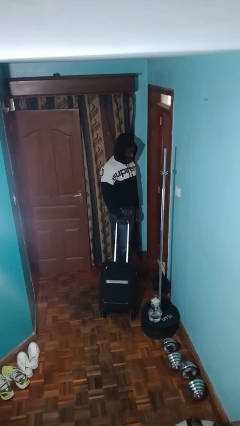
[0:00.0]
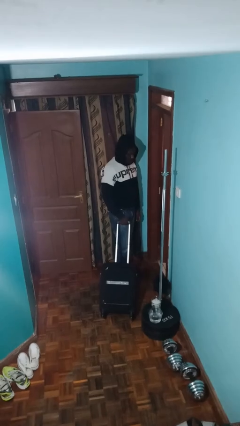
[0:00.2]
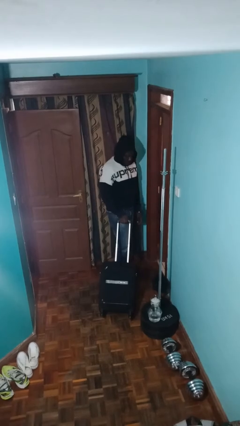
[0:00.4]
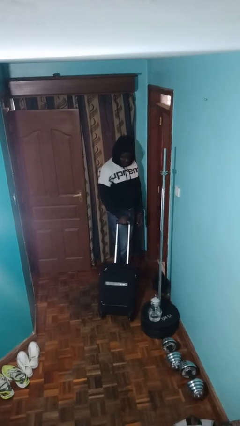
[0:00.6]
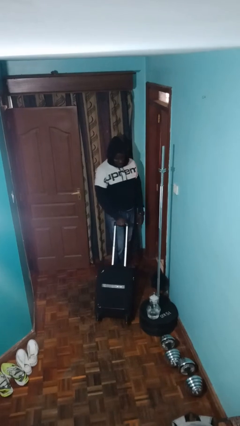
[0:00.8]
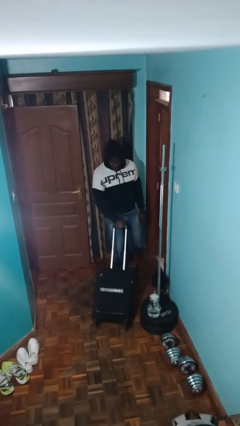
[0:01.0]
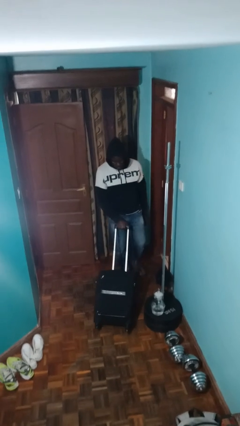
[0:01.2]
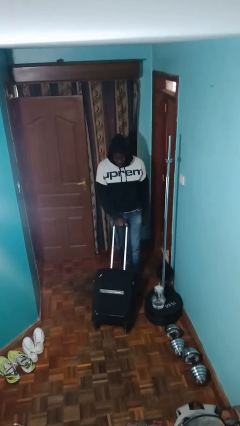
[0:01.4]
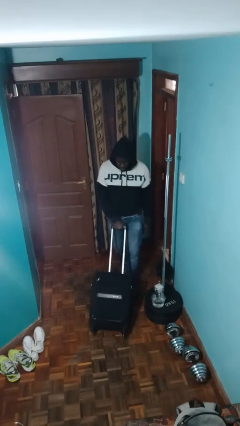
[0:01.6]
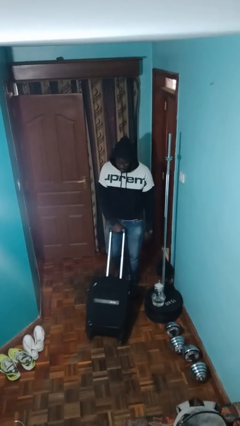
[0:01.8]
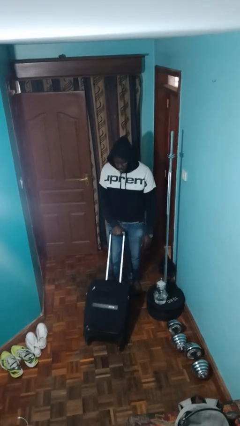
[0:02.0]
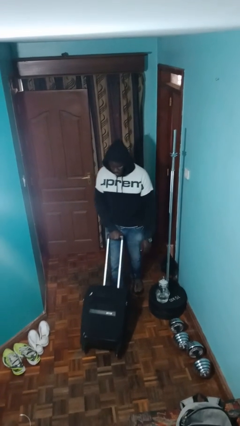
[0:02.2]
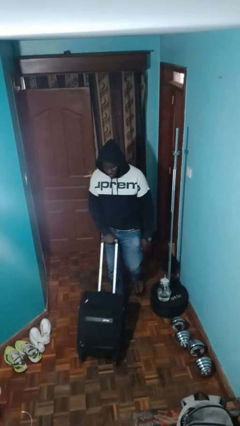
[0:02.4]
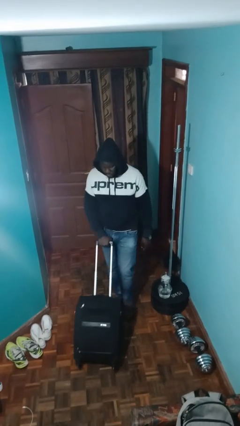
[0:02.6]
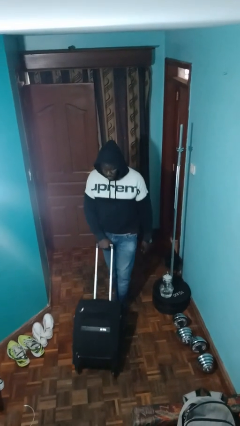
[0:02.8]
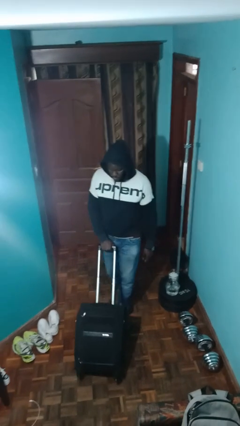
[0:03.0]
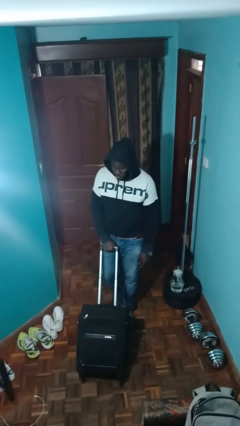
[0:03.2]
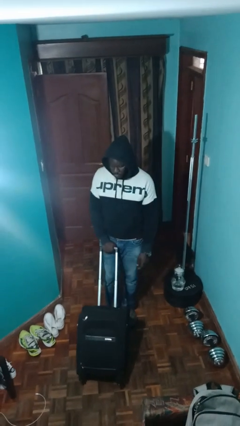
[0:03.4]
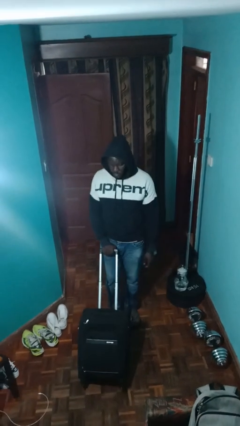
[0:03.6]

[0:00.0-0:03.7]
person pushes wheeled cart

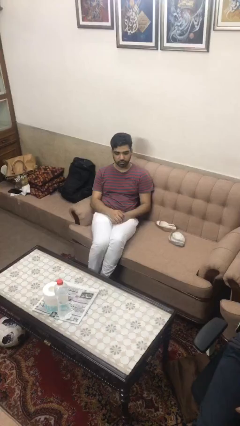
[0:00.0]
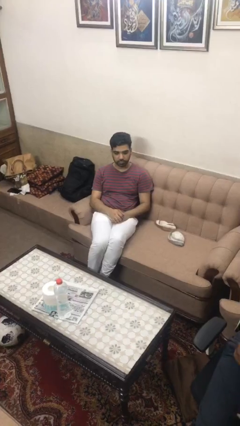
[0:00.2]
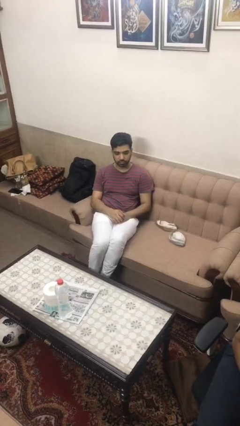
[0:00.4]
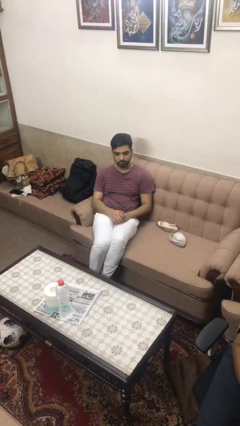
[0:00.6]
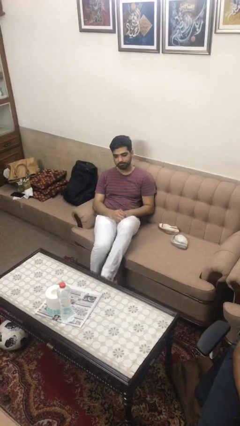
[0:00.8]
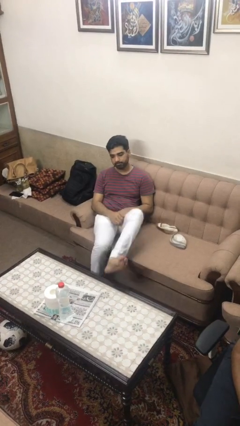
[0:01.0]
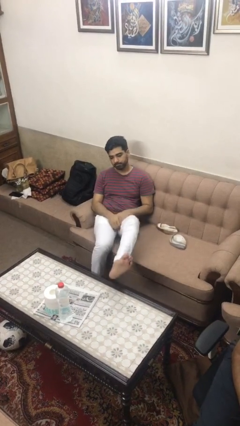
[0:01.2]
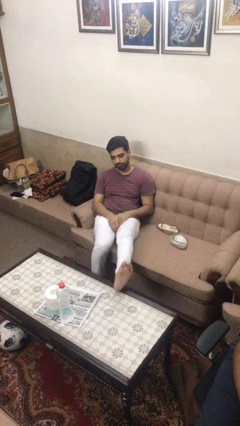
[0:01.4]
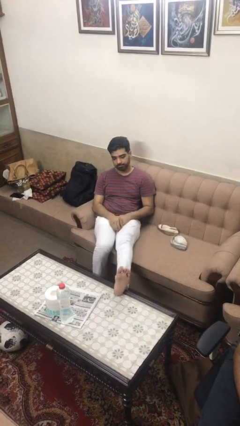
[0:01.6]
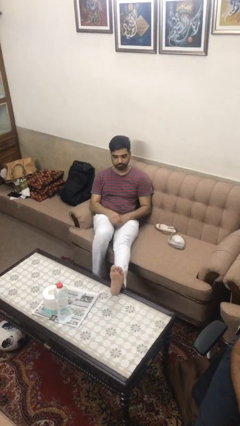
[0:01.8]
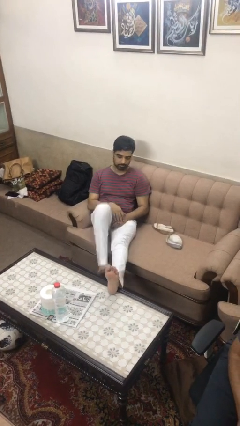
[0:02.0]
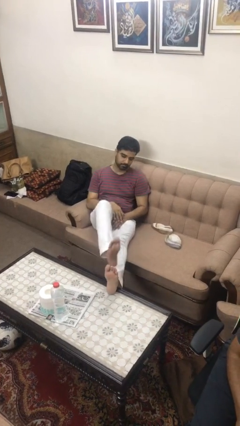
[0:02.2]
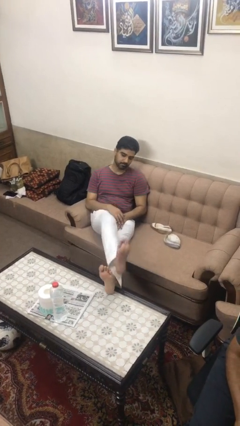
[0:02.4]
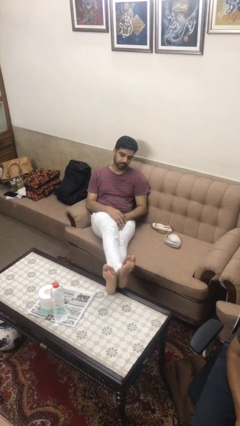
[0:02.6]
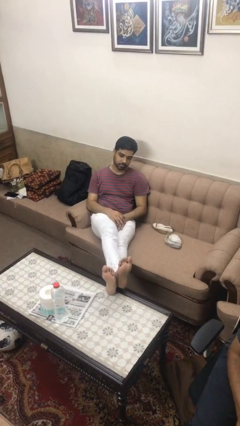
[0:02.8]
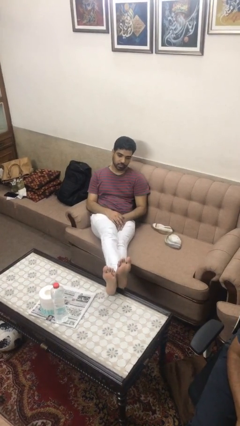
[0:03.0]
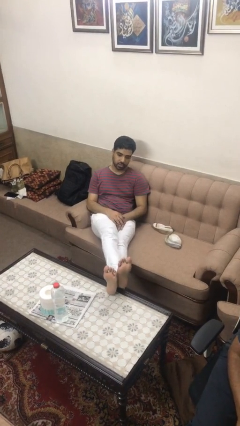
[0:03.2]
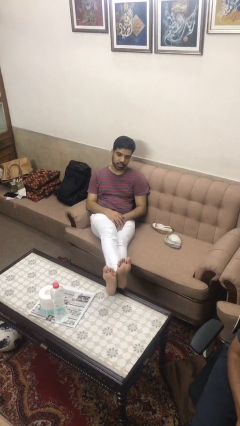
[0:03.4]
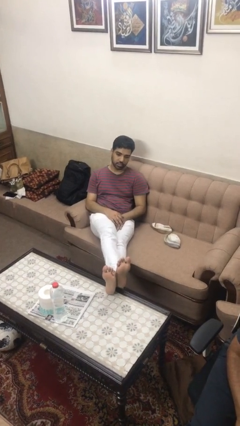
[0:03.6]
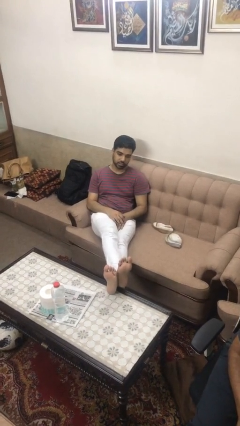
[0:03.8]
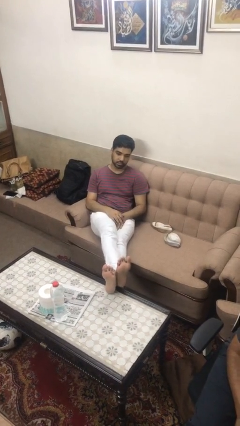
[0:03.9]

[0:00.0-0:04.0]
person puts feet up

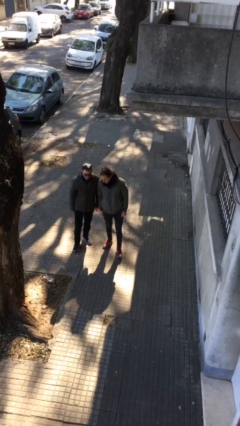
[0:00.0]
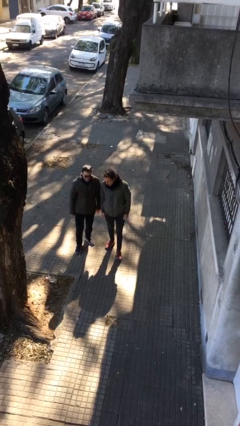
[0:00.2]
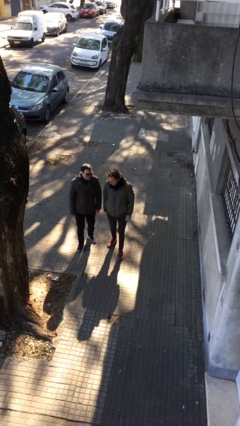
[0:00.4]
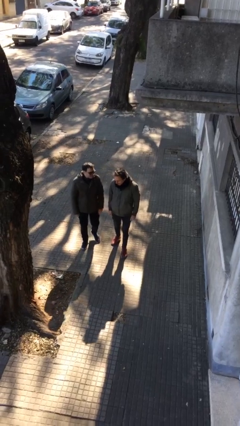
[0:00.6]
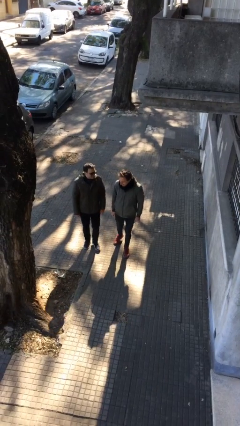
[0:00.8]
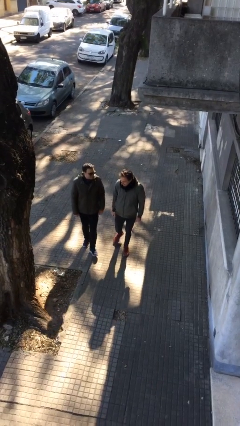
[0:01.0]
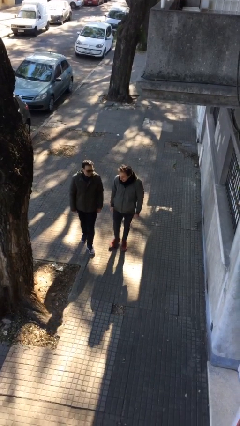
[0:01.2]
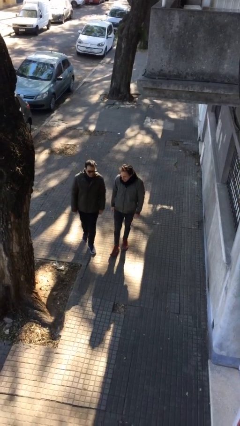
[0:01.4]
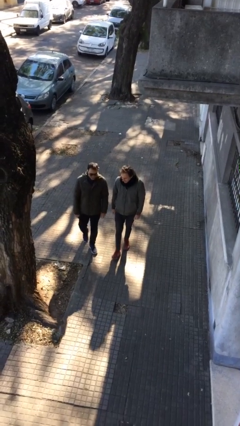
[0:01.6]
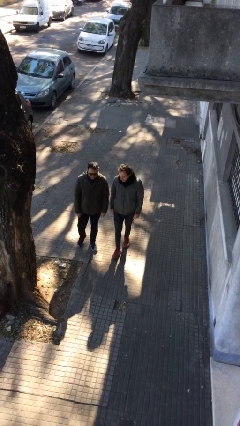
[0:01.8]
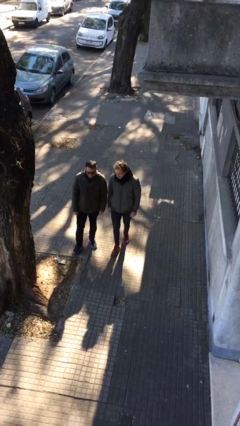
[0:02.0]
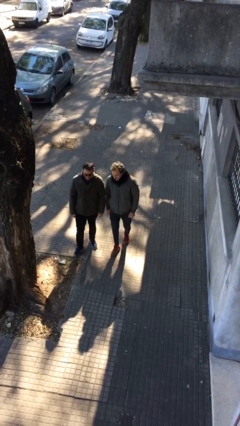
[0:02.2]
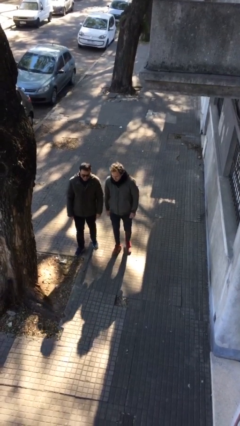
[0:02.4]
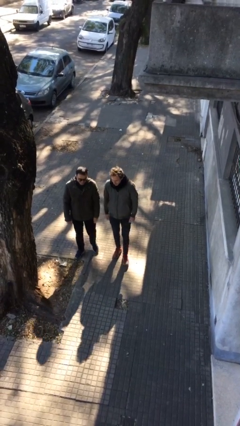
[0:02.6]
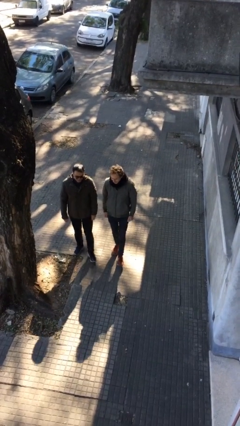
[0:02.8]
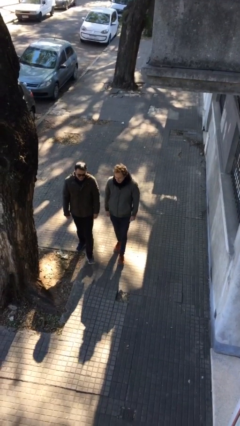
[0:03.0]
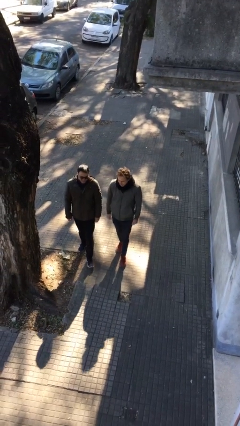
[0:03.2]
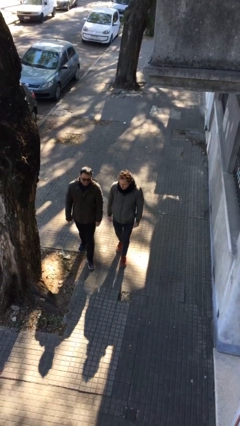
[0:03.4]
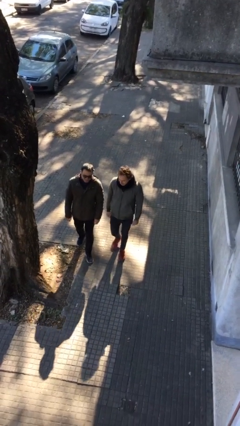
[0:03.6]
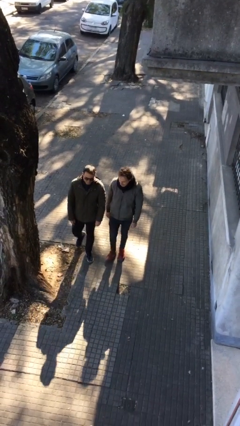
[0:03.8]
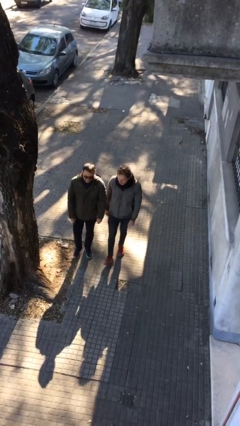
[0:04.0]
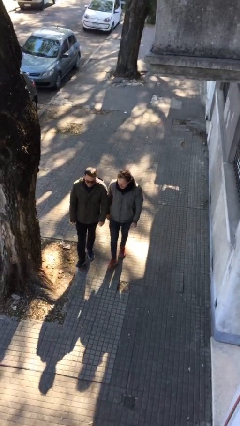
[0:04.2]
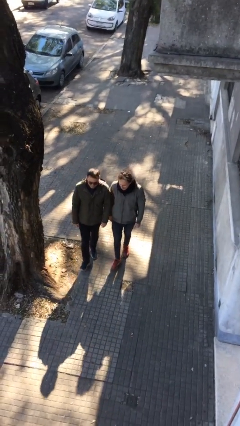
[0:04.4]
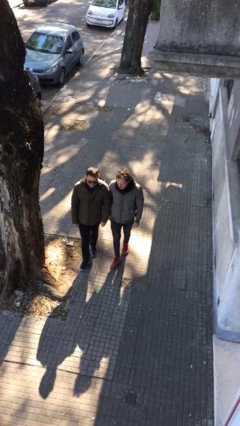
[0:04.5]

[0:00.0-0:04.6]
person talks to person

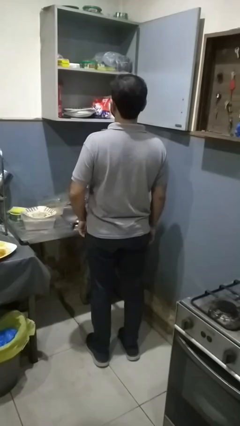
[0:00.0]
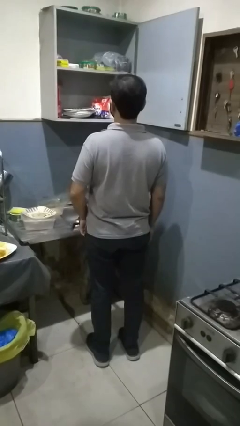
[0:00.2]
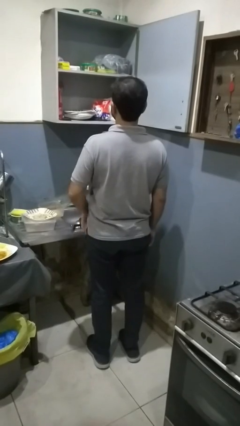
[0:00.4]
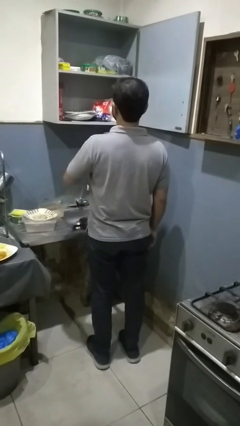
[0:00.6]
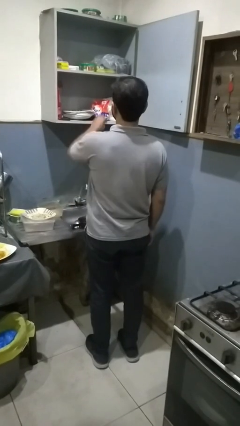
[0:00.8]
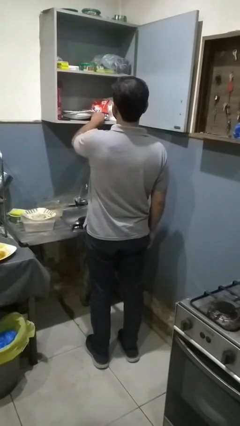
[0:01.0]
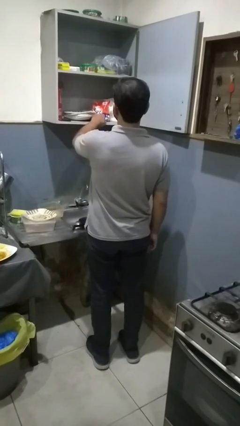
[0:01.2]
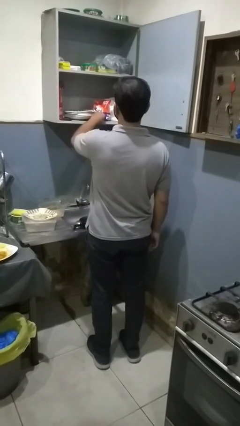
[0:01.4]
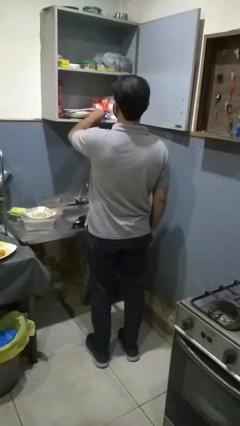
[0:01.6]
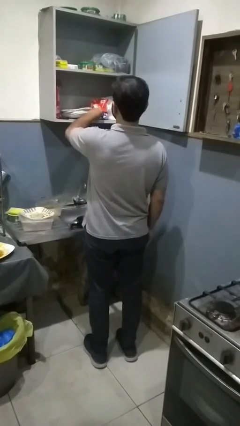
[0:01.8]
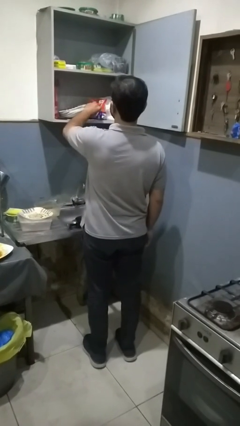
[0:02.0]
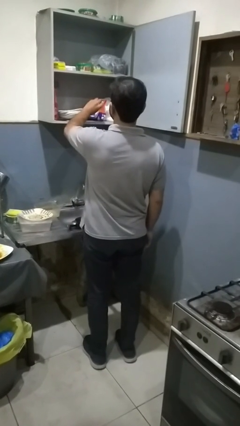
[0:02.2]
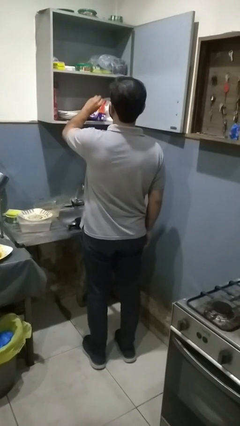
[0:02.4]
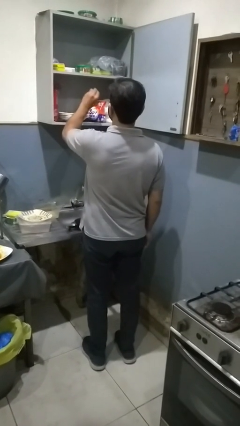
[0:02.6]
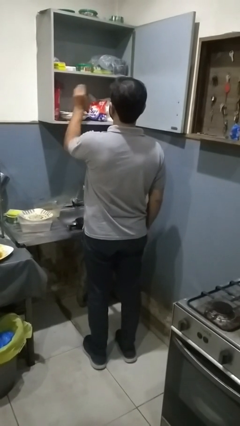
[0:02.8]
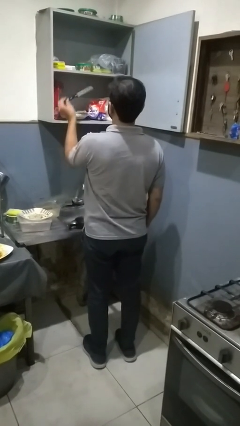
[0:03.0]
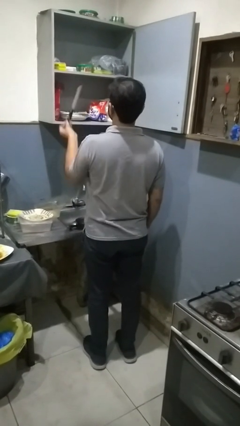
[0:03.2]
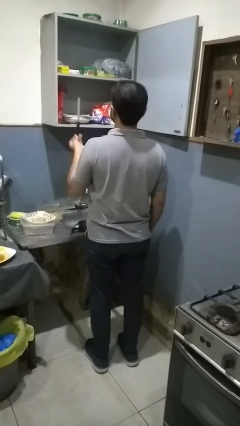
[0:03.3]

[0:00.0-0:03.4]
person takes object from cabinet

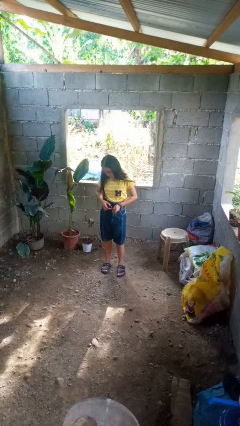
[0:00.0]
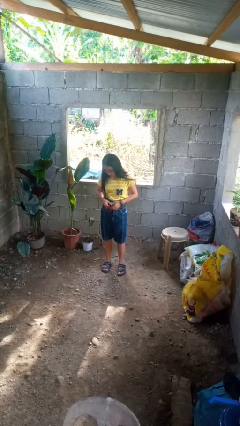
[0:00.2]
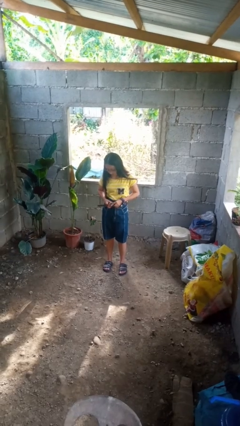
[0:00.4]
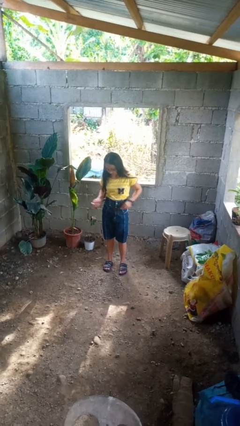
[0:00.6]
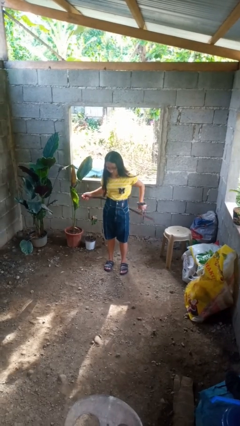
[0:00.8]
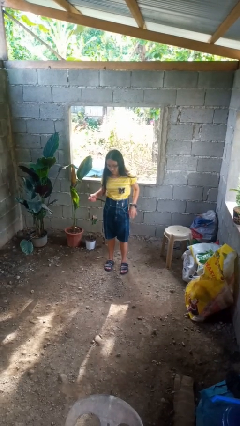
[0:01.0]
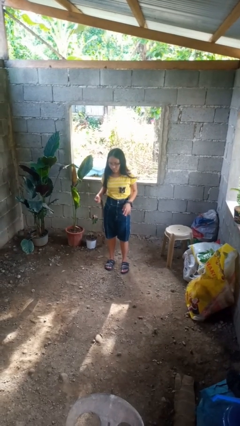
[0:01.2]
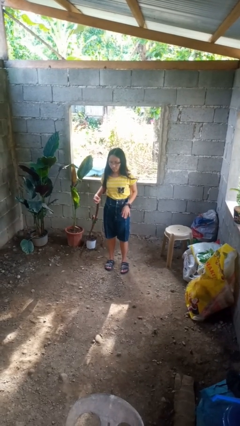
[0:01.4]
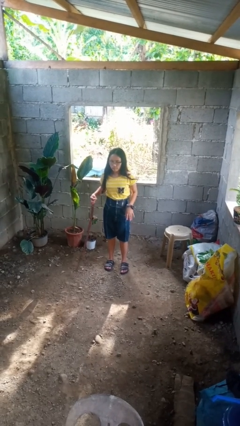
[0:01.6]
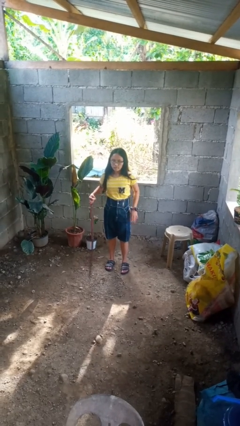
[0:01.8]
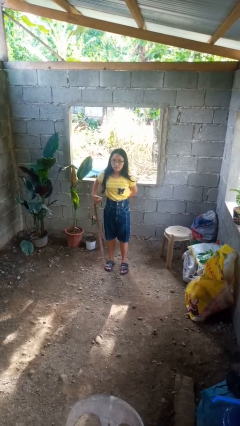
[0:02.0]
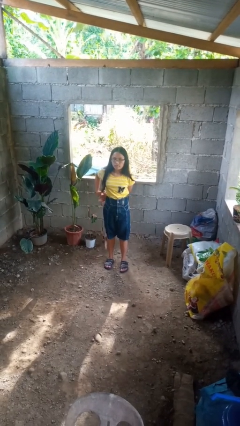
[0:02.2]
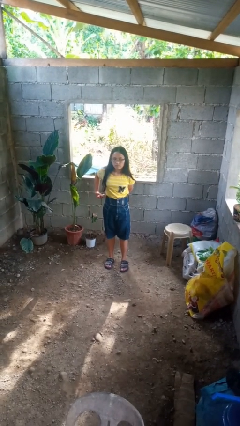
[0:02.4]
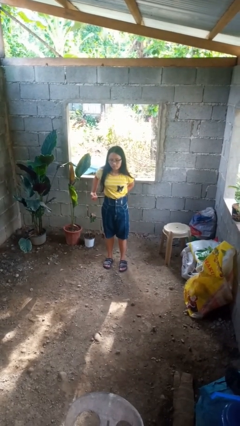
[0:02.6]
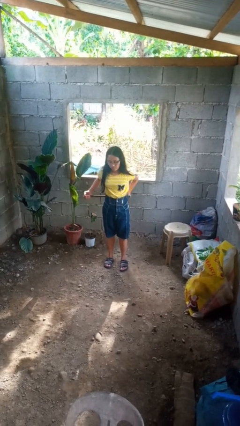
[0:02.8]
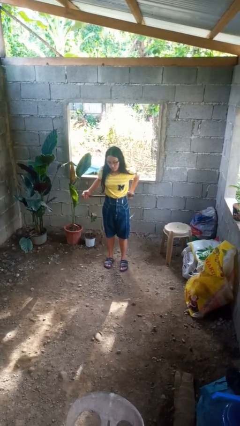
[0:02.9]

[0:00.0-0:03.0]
person takes off belt
